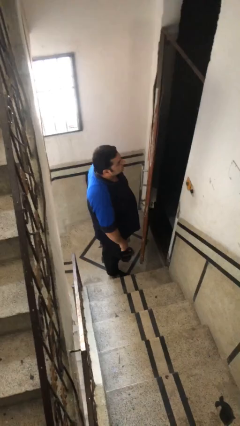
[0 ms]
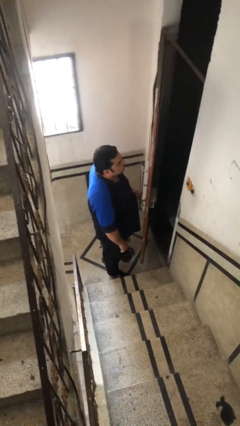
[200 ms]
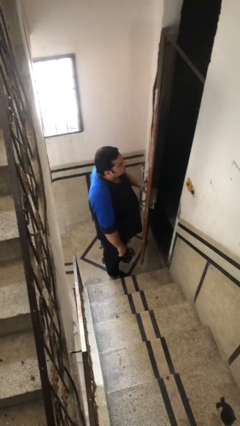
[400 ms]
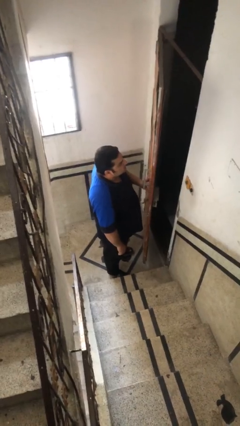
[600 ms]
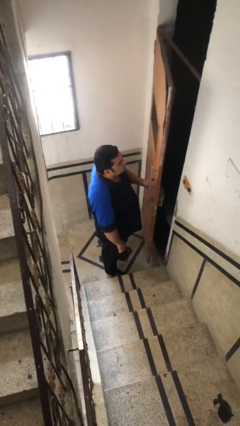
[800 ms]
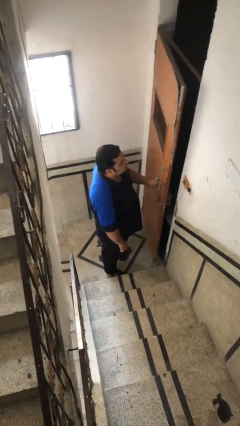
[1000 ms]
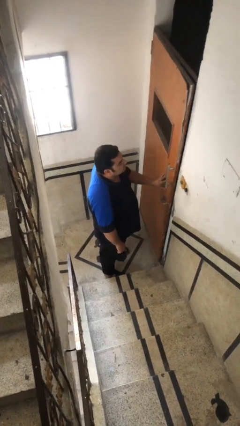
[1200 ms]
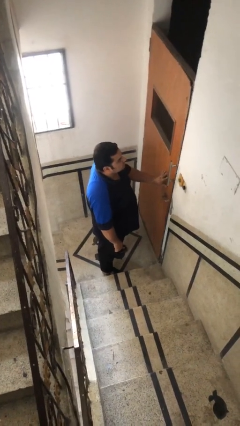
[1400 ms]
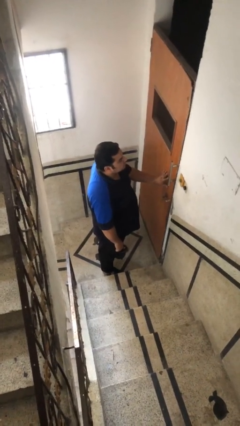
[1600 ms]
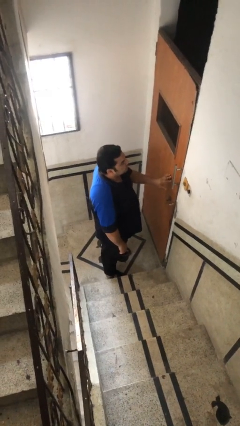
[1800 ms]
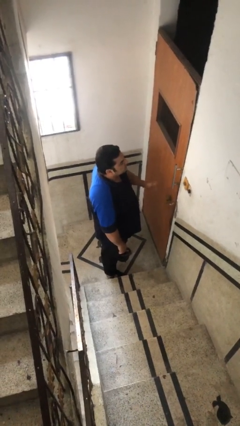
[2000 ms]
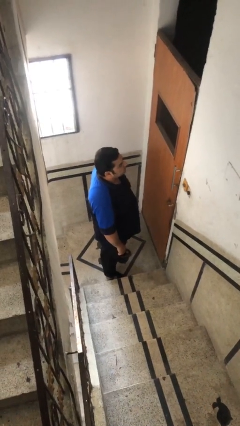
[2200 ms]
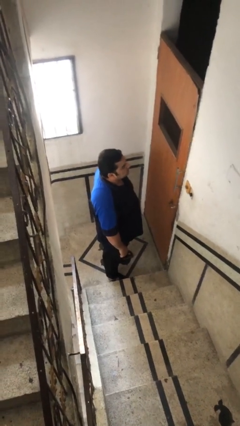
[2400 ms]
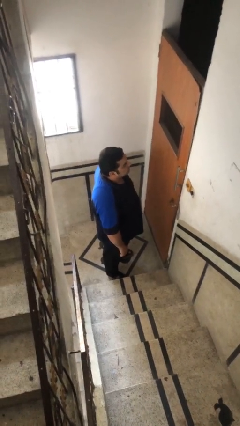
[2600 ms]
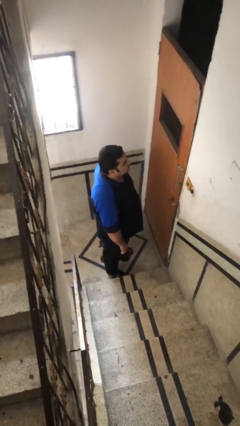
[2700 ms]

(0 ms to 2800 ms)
person closes facility door

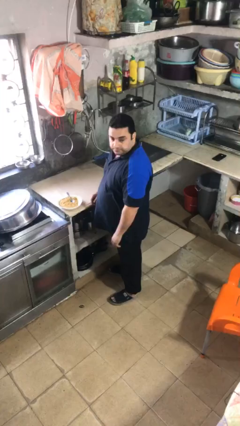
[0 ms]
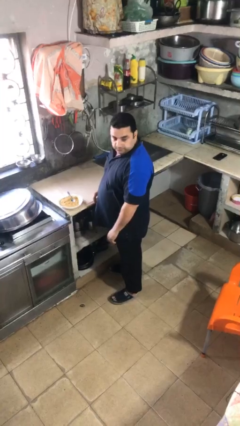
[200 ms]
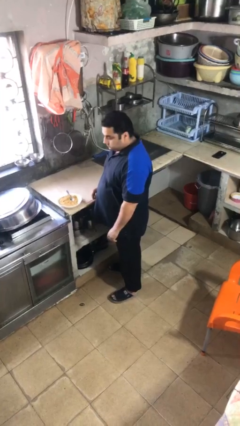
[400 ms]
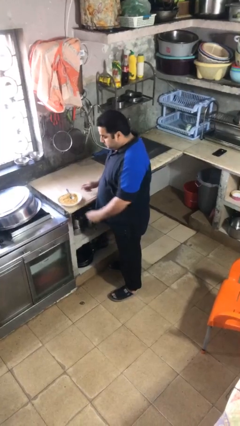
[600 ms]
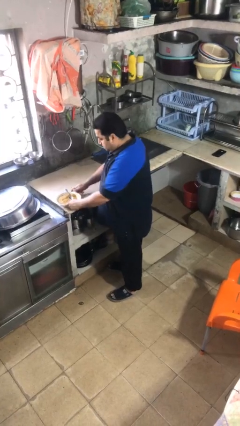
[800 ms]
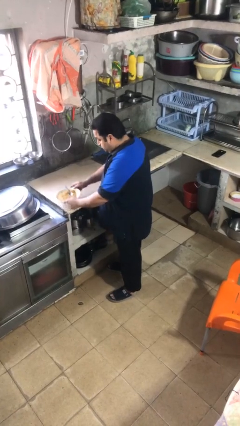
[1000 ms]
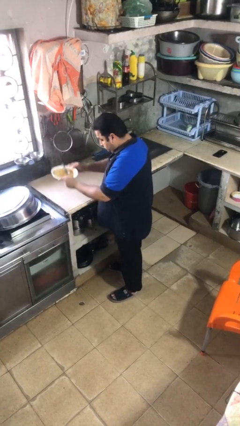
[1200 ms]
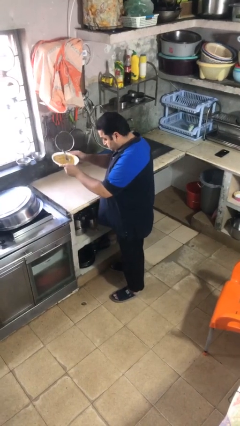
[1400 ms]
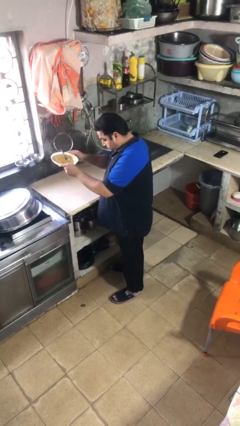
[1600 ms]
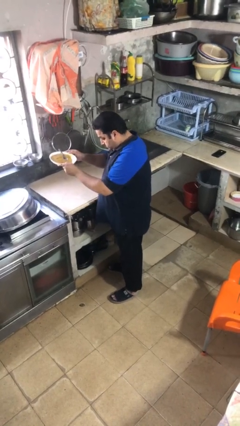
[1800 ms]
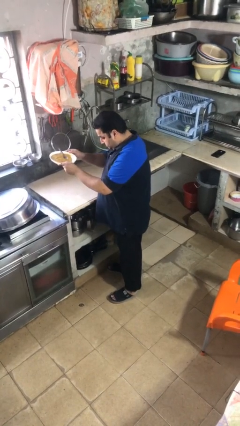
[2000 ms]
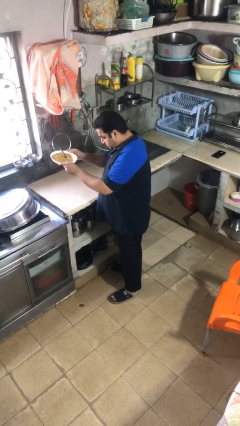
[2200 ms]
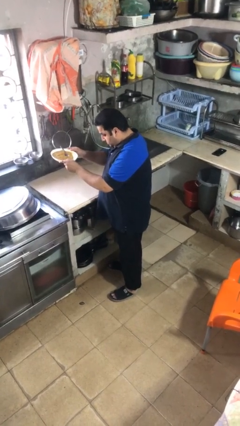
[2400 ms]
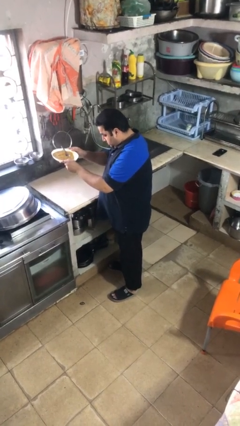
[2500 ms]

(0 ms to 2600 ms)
person picks up object from countertop

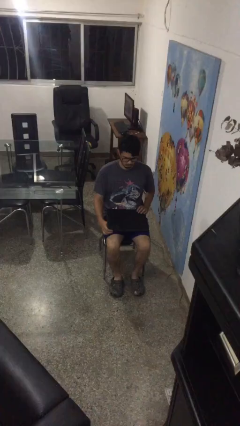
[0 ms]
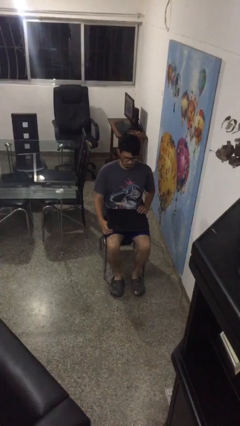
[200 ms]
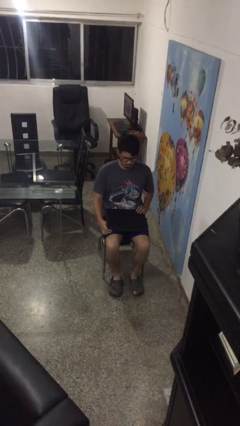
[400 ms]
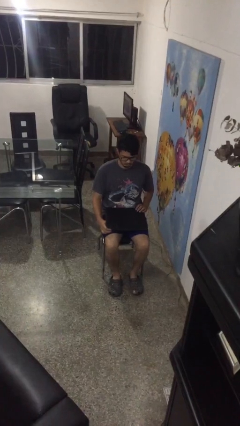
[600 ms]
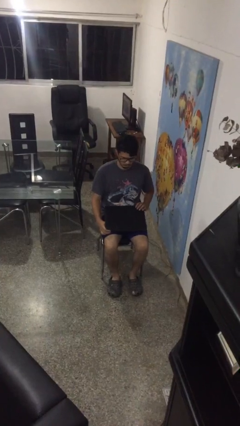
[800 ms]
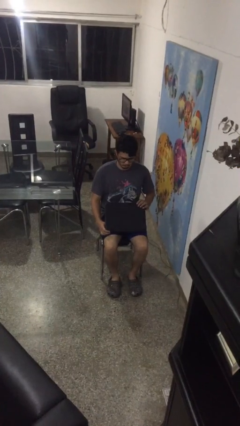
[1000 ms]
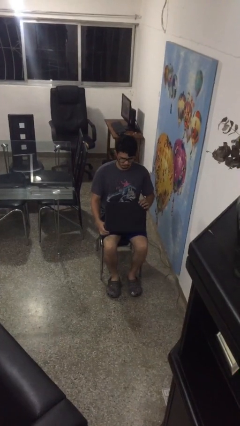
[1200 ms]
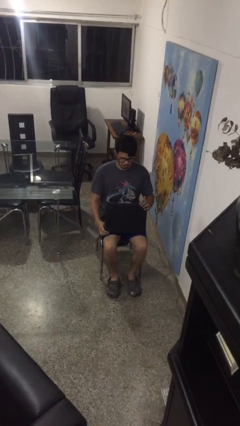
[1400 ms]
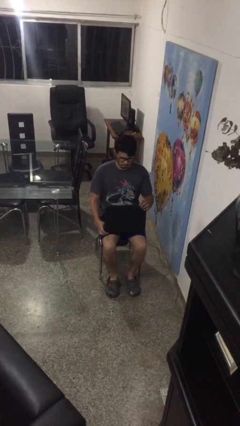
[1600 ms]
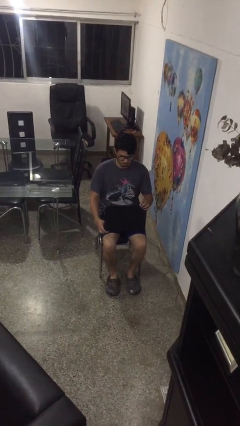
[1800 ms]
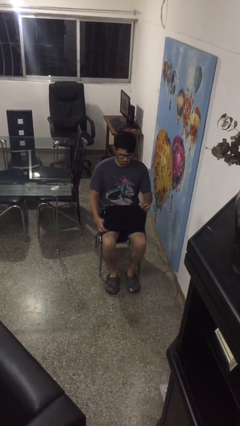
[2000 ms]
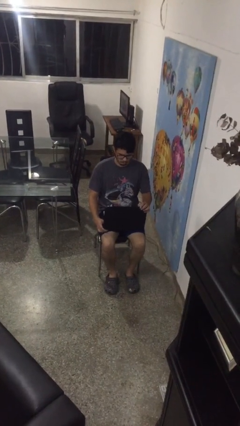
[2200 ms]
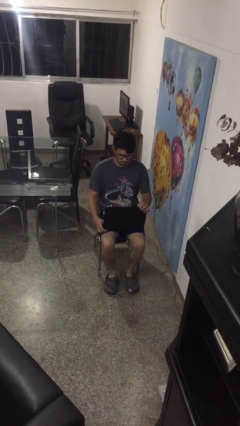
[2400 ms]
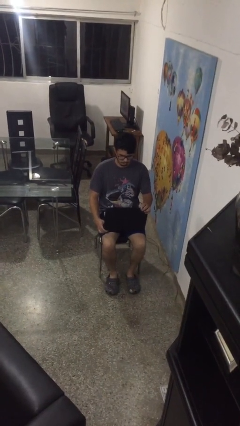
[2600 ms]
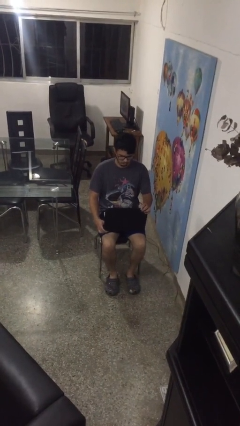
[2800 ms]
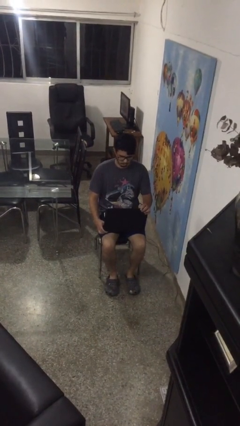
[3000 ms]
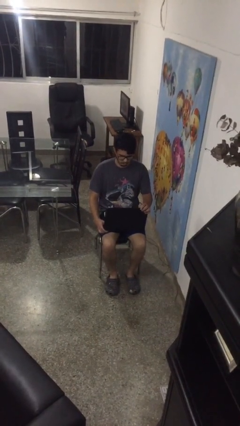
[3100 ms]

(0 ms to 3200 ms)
person opens laptop

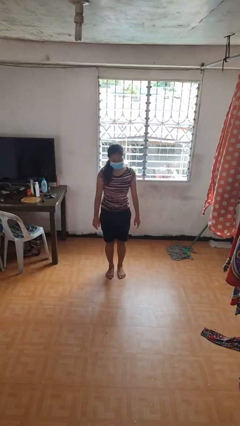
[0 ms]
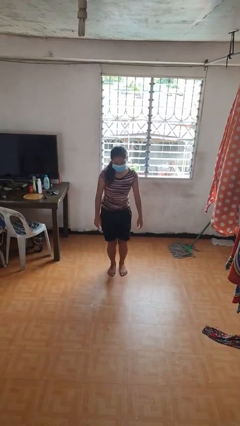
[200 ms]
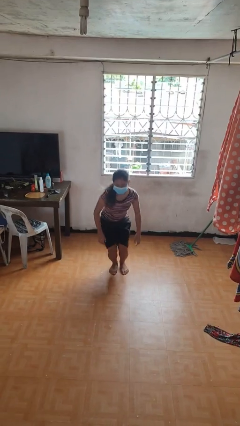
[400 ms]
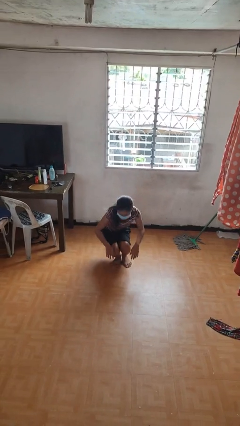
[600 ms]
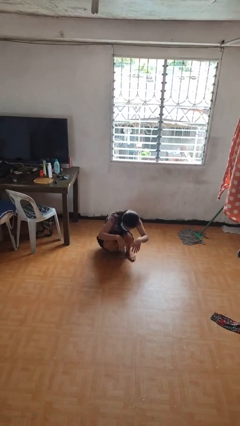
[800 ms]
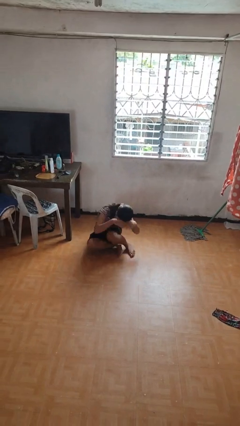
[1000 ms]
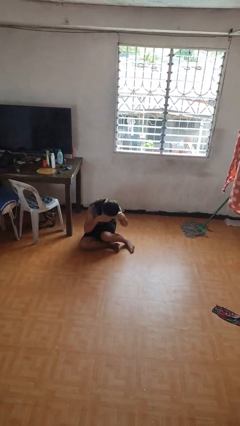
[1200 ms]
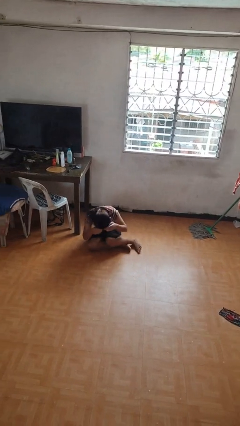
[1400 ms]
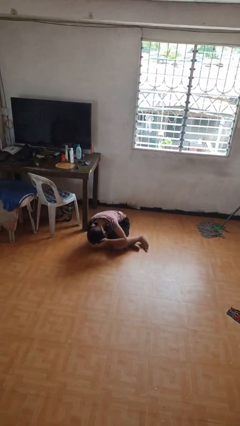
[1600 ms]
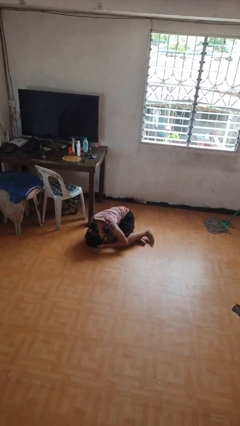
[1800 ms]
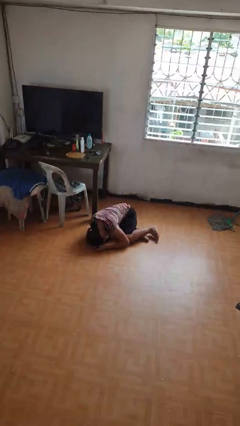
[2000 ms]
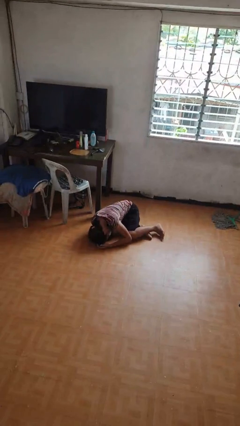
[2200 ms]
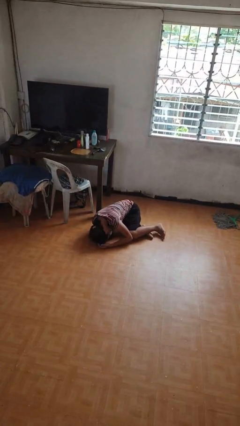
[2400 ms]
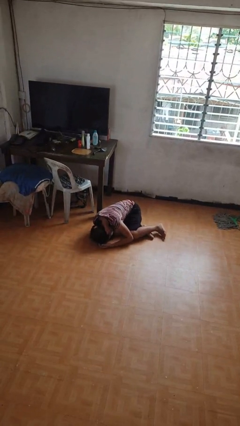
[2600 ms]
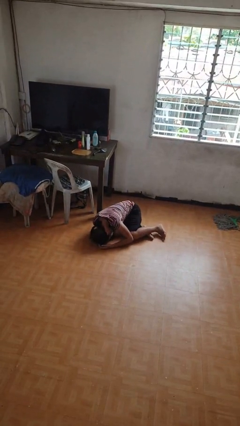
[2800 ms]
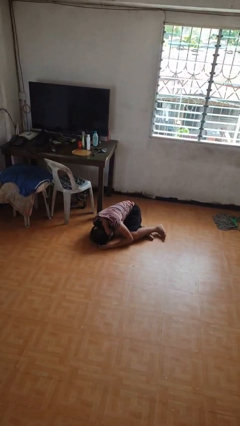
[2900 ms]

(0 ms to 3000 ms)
person falls while standing

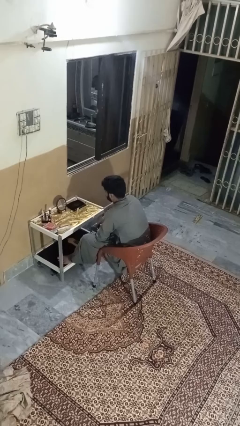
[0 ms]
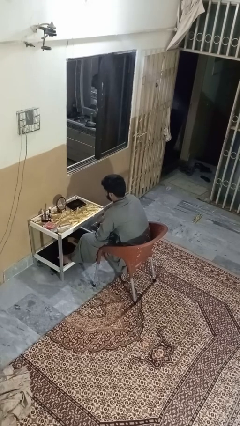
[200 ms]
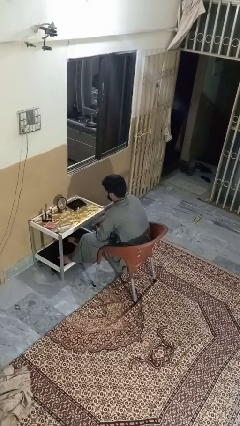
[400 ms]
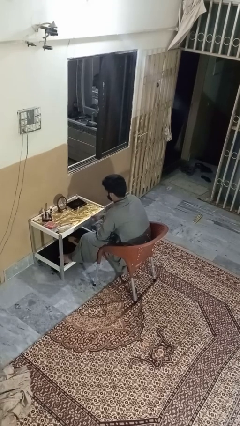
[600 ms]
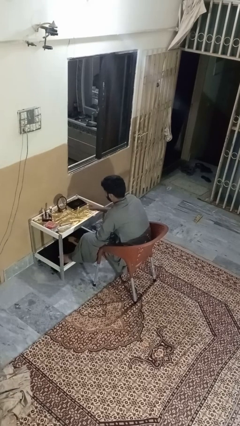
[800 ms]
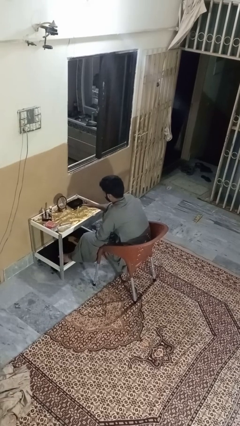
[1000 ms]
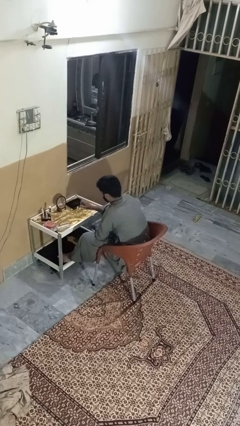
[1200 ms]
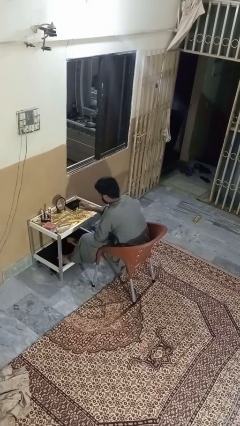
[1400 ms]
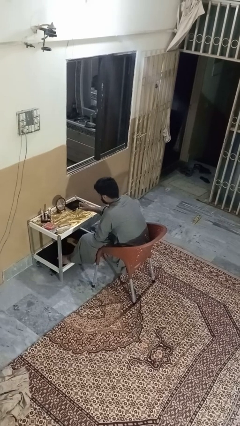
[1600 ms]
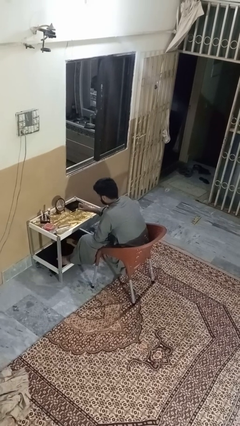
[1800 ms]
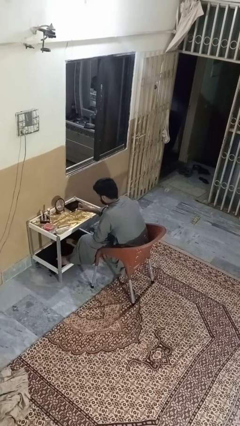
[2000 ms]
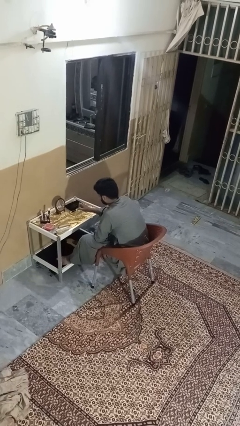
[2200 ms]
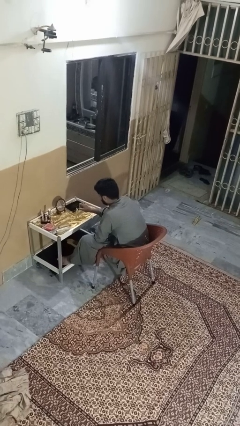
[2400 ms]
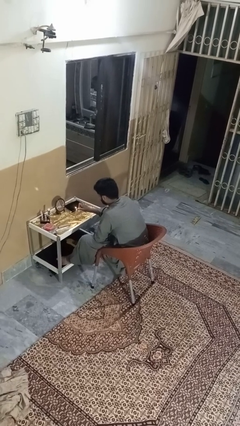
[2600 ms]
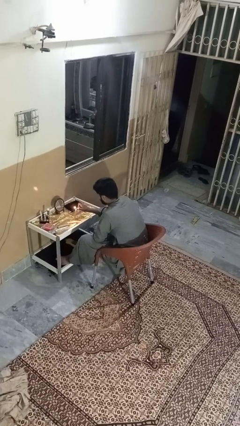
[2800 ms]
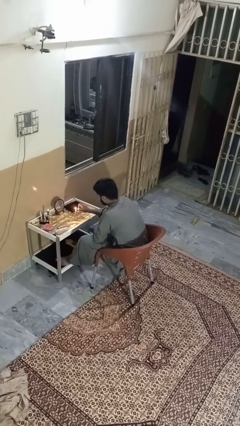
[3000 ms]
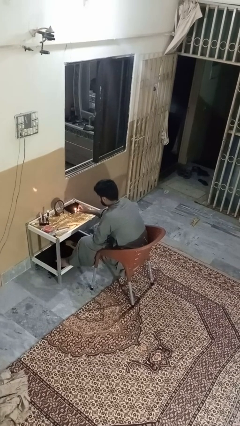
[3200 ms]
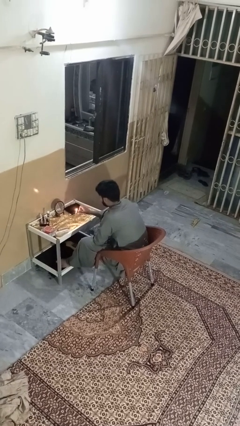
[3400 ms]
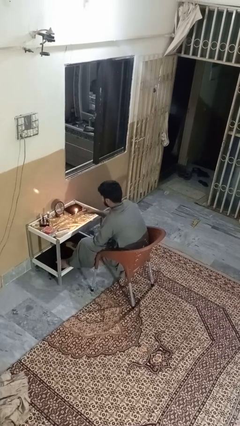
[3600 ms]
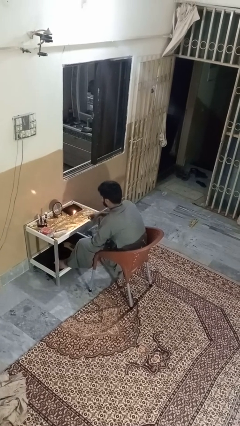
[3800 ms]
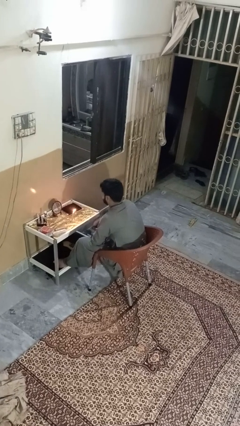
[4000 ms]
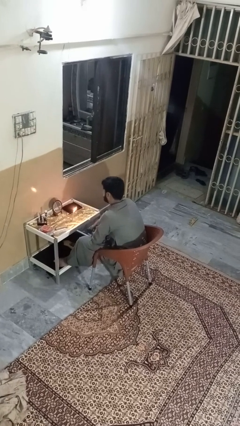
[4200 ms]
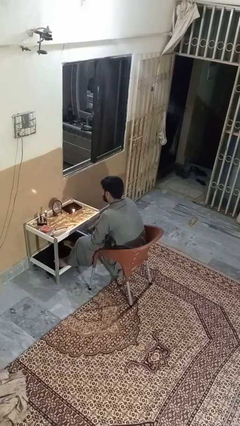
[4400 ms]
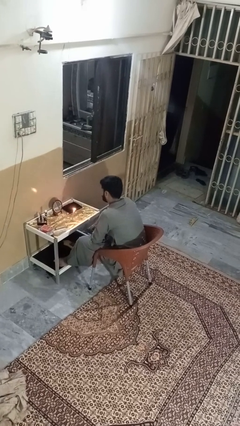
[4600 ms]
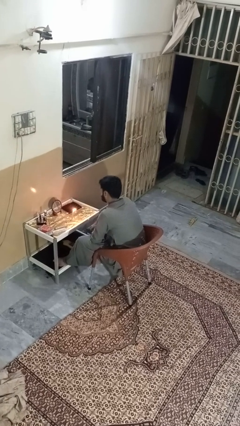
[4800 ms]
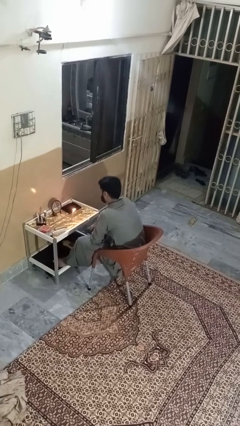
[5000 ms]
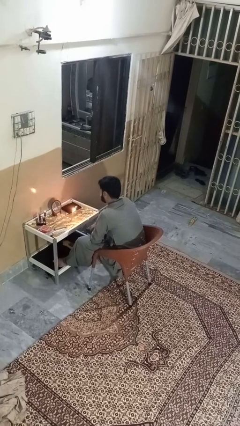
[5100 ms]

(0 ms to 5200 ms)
person lights candle

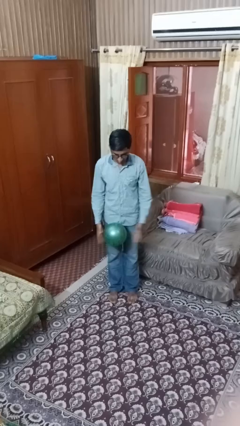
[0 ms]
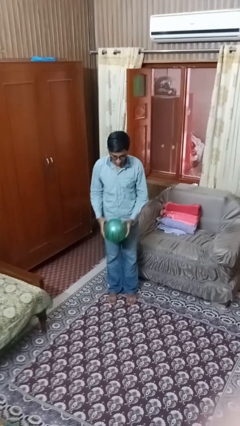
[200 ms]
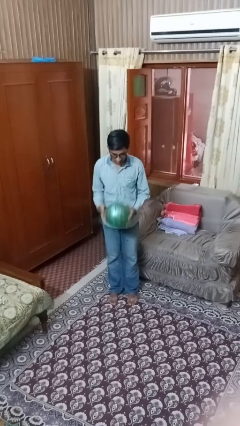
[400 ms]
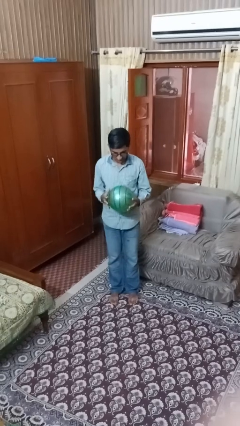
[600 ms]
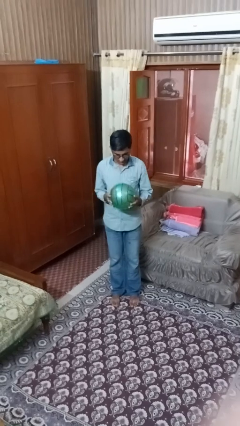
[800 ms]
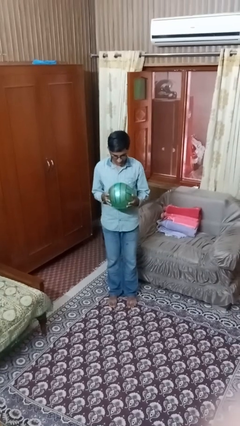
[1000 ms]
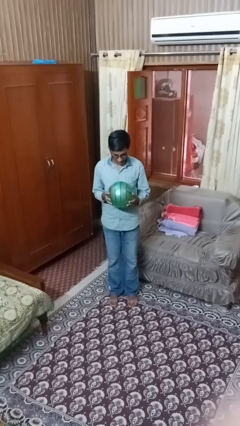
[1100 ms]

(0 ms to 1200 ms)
person bounces ball on floor
